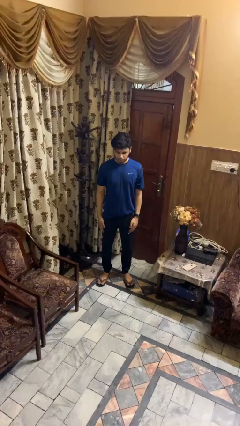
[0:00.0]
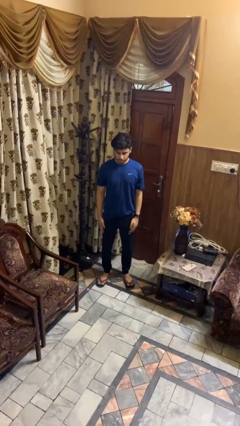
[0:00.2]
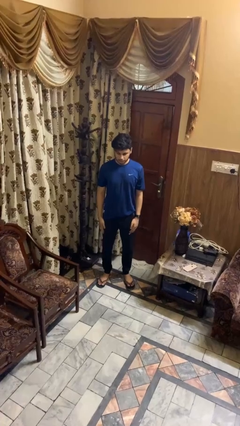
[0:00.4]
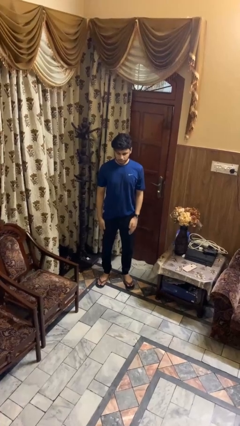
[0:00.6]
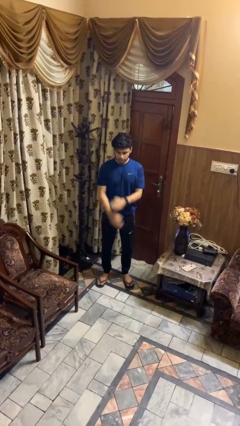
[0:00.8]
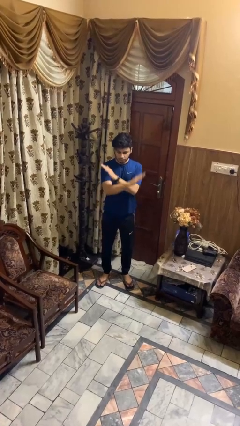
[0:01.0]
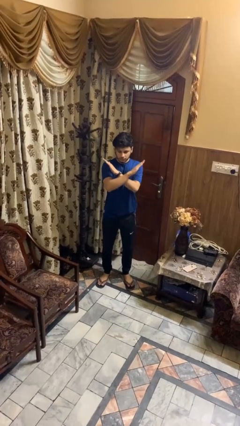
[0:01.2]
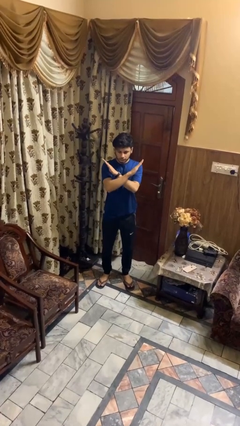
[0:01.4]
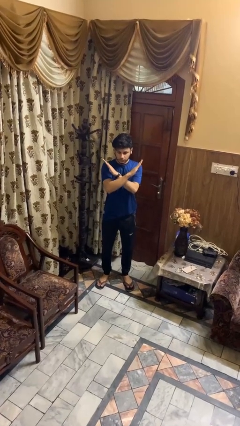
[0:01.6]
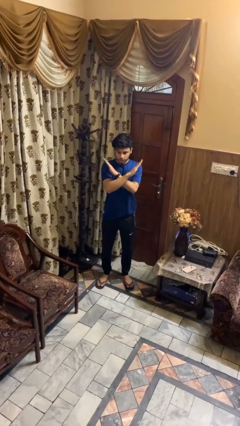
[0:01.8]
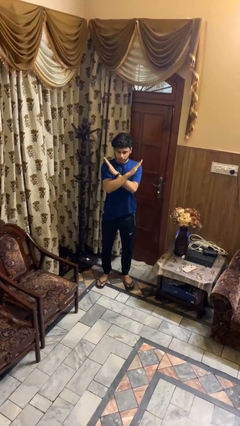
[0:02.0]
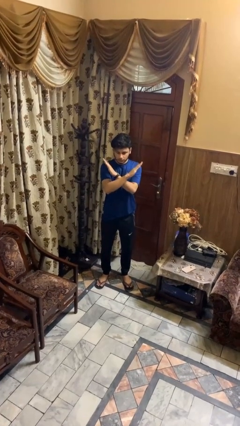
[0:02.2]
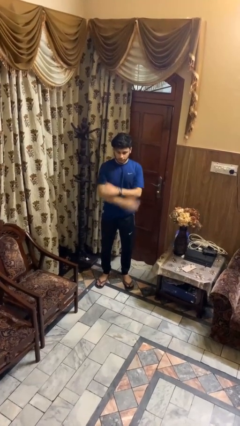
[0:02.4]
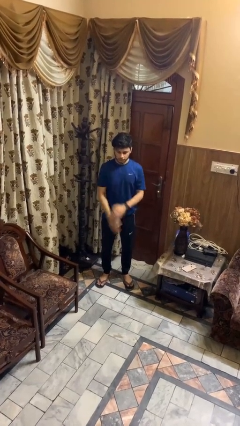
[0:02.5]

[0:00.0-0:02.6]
person gestures arms x

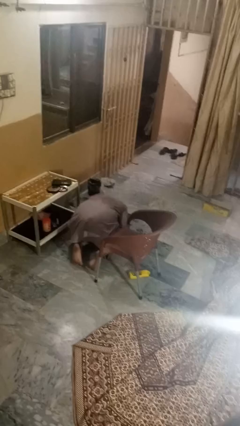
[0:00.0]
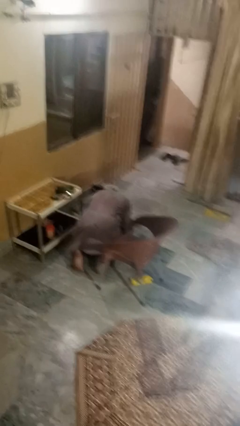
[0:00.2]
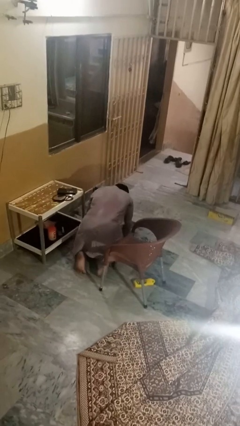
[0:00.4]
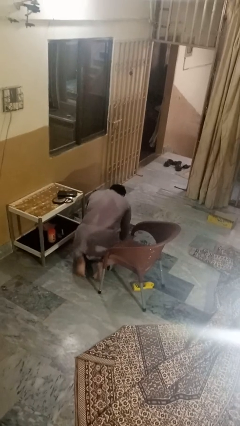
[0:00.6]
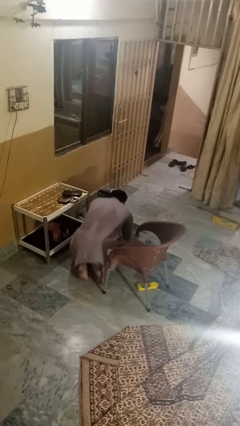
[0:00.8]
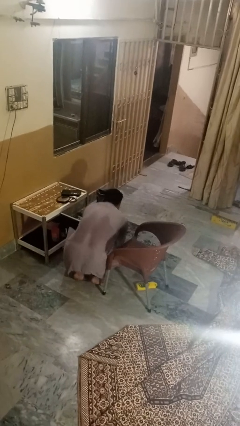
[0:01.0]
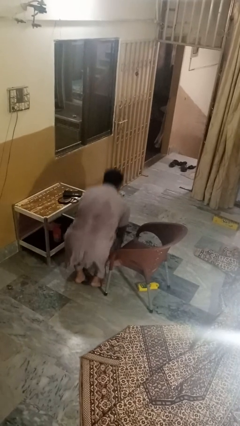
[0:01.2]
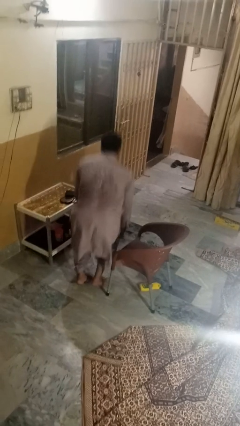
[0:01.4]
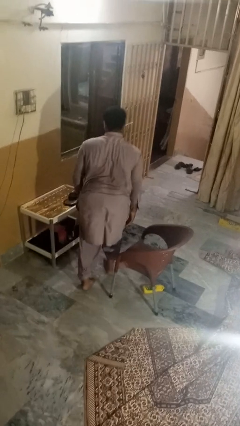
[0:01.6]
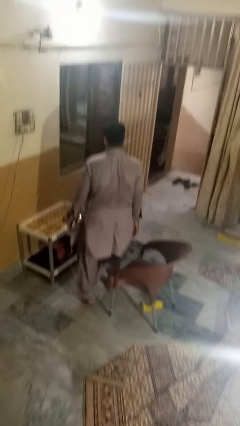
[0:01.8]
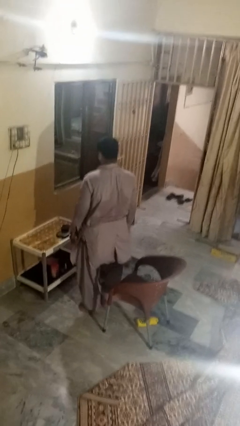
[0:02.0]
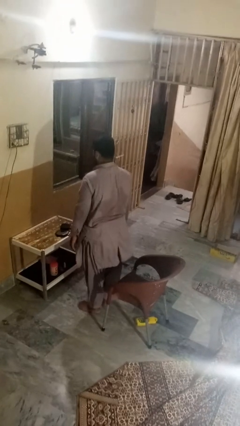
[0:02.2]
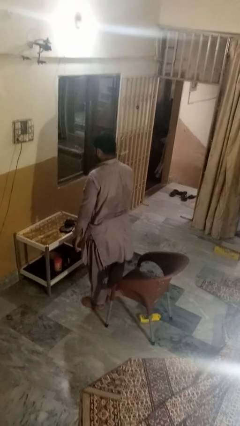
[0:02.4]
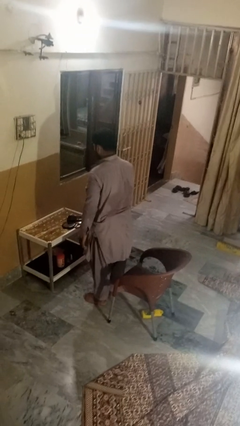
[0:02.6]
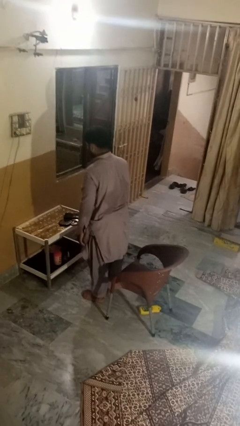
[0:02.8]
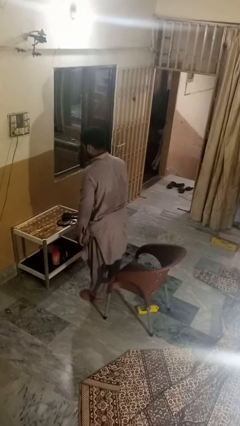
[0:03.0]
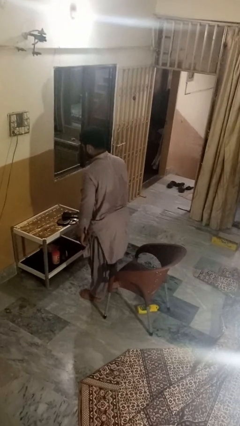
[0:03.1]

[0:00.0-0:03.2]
person stands up from floor

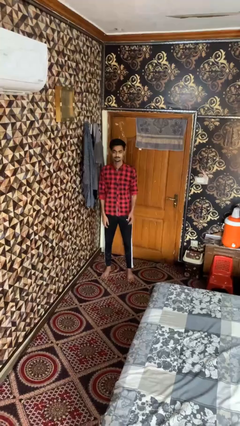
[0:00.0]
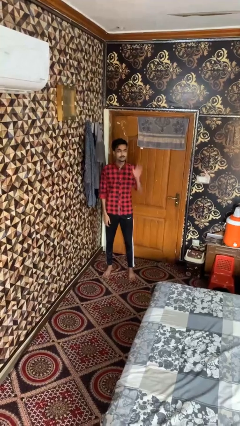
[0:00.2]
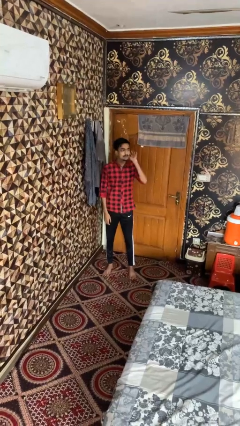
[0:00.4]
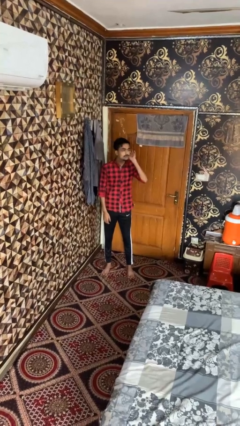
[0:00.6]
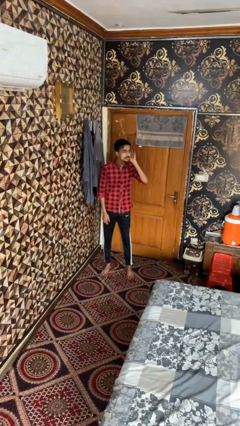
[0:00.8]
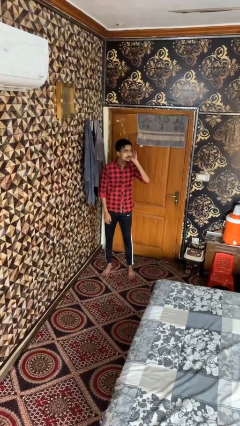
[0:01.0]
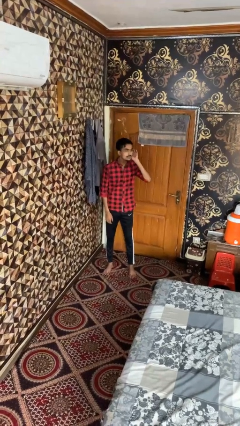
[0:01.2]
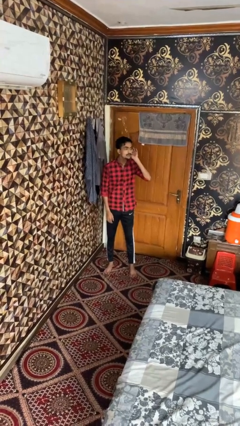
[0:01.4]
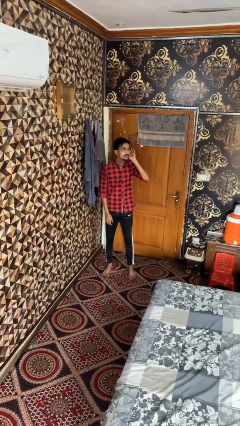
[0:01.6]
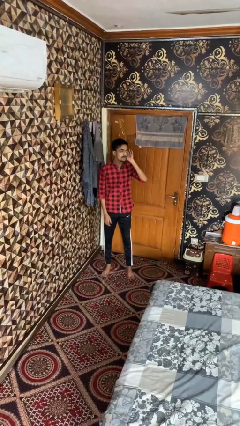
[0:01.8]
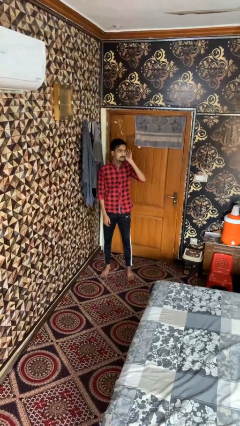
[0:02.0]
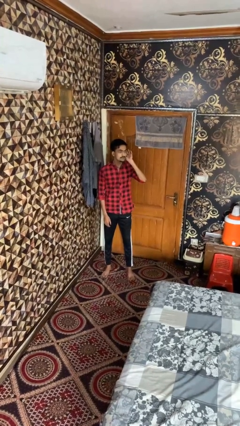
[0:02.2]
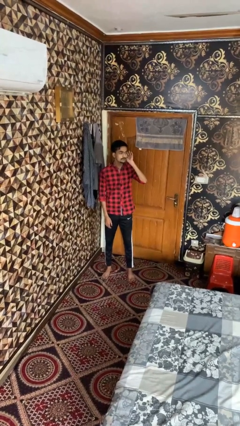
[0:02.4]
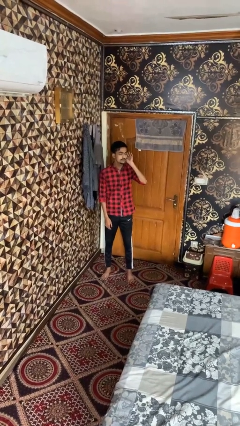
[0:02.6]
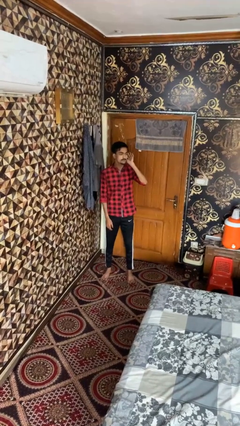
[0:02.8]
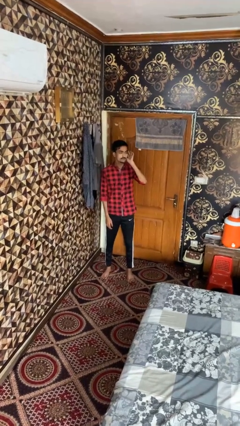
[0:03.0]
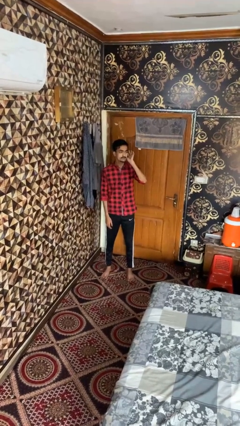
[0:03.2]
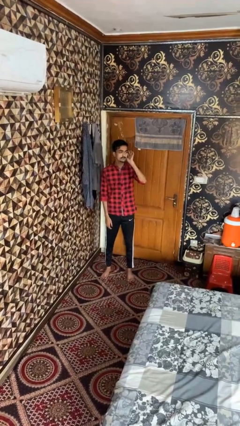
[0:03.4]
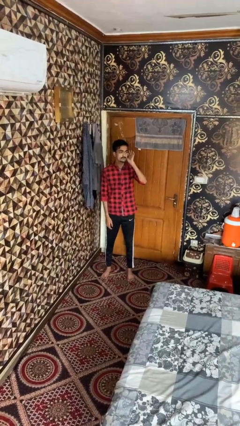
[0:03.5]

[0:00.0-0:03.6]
person gestures listen closely

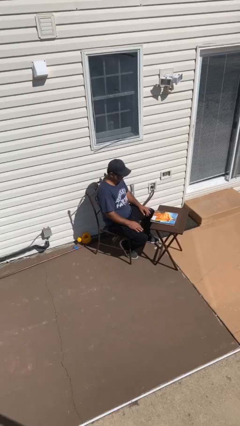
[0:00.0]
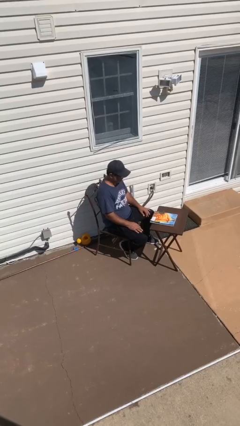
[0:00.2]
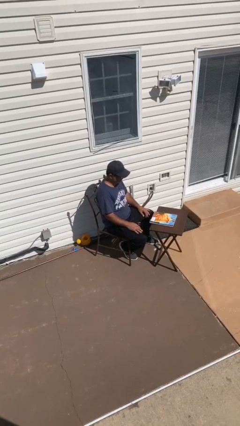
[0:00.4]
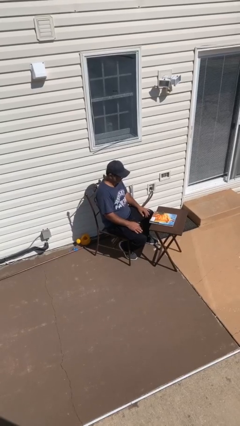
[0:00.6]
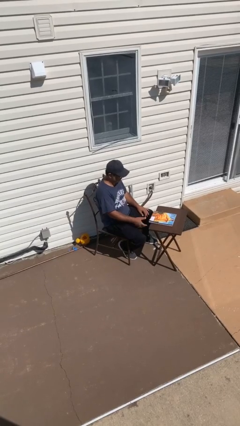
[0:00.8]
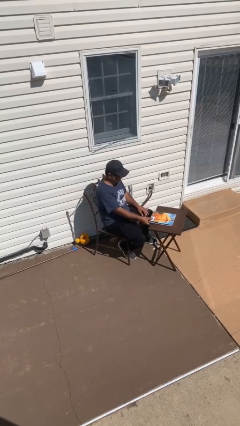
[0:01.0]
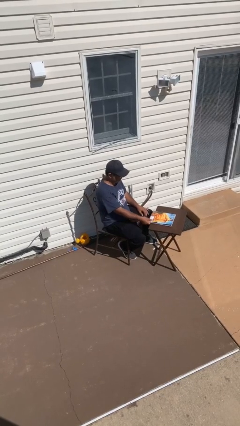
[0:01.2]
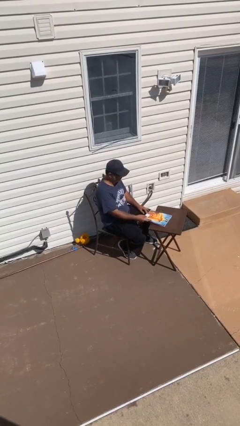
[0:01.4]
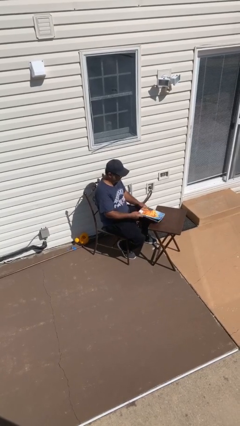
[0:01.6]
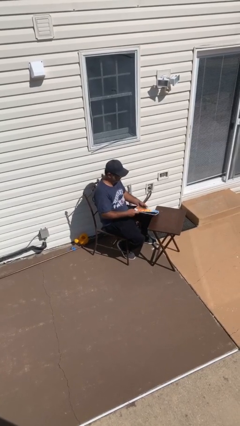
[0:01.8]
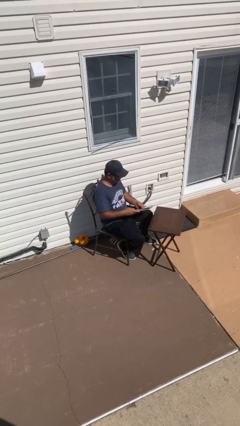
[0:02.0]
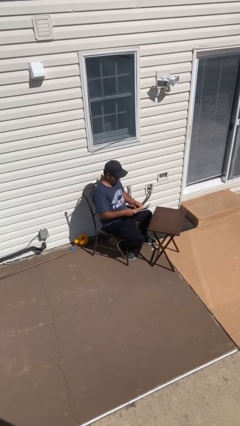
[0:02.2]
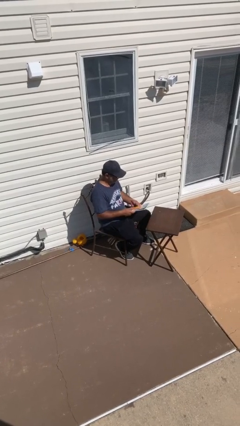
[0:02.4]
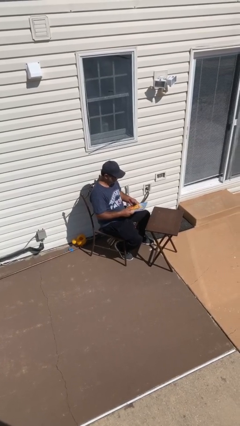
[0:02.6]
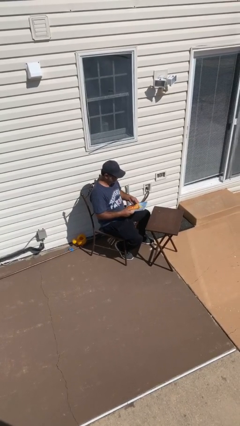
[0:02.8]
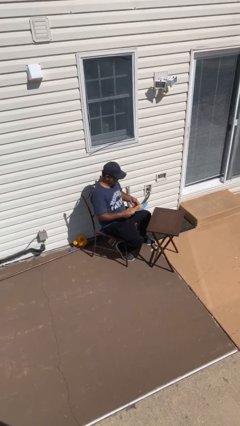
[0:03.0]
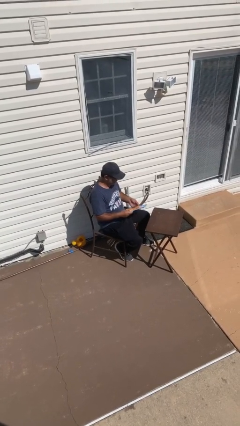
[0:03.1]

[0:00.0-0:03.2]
person picks up object from table

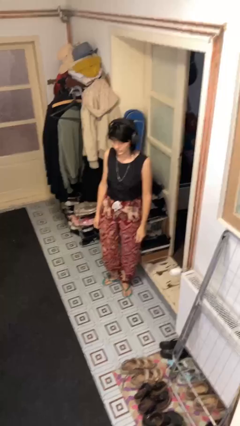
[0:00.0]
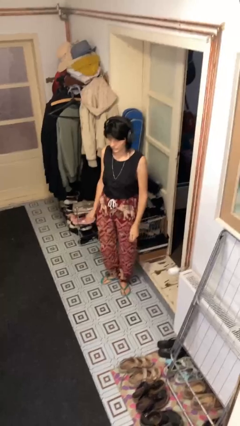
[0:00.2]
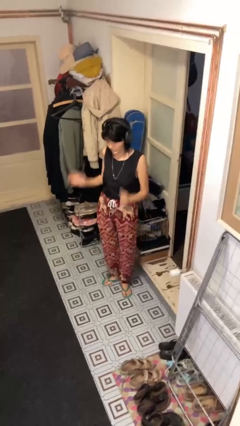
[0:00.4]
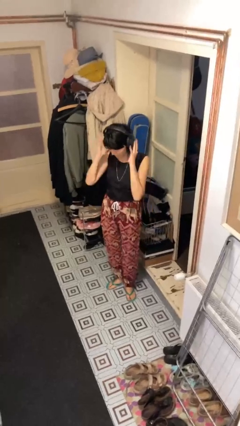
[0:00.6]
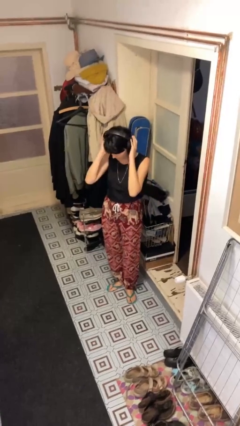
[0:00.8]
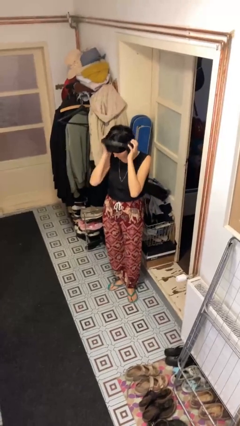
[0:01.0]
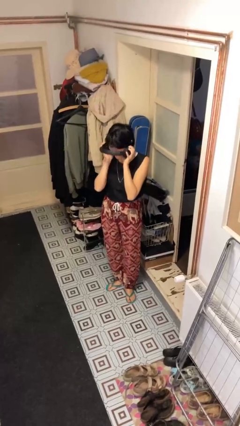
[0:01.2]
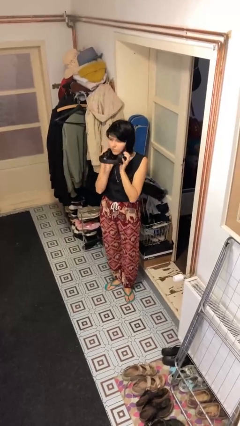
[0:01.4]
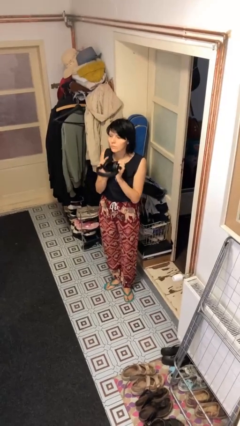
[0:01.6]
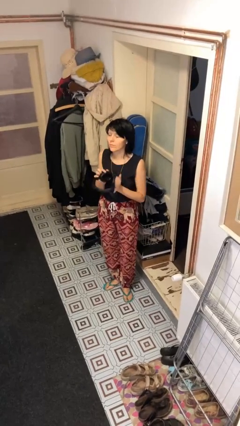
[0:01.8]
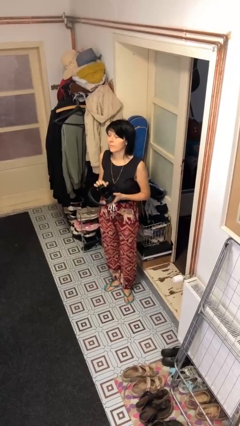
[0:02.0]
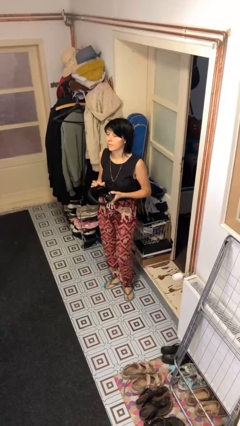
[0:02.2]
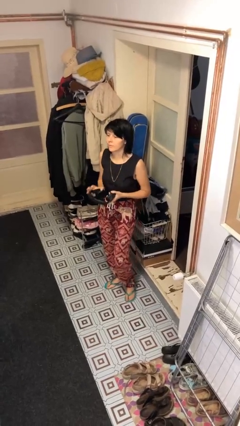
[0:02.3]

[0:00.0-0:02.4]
person takes off headphones

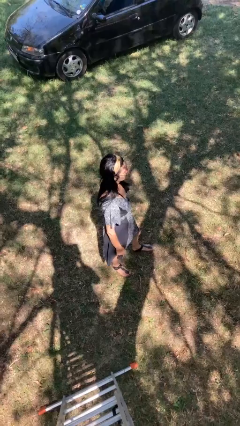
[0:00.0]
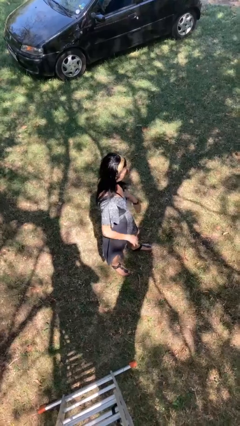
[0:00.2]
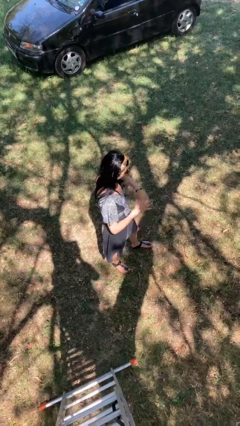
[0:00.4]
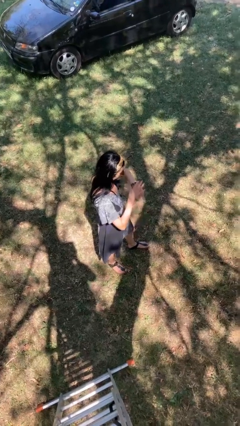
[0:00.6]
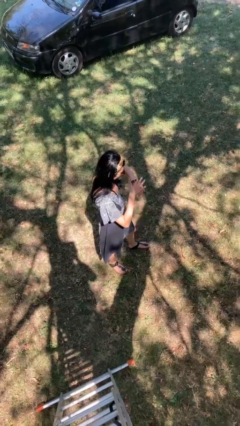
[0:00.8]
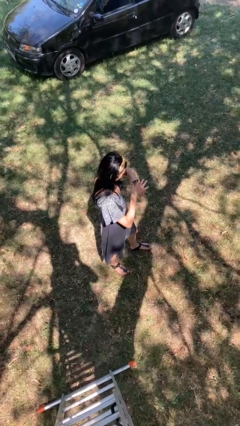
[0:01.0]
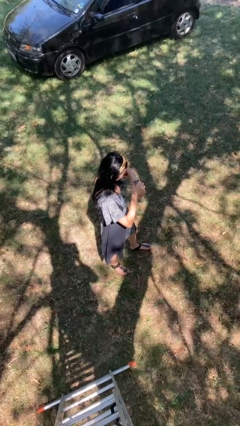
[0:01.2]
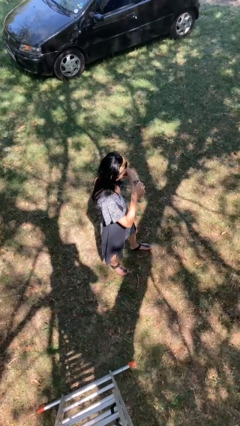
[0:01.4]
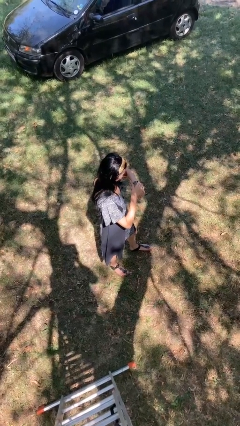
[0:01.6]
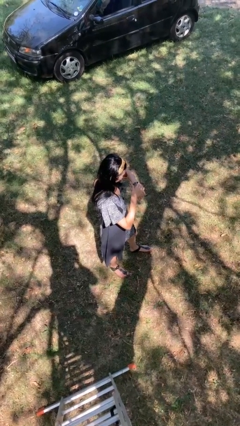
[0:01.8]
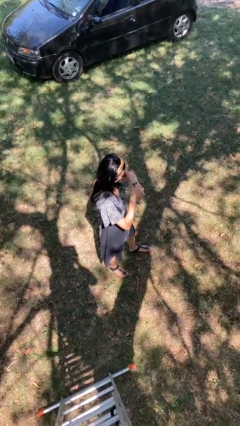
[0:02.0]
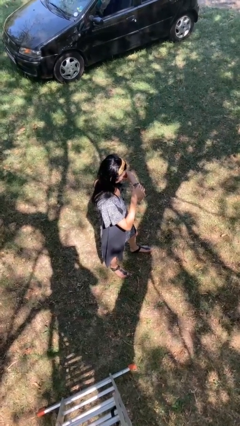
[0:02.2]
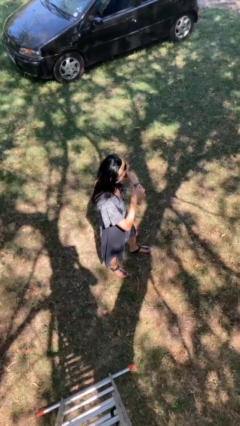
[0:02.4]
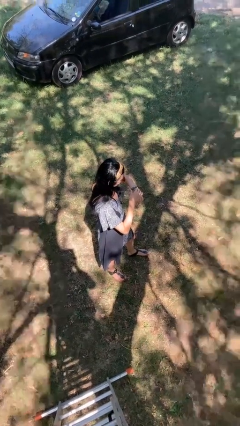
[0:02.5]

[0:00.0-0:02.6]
person looks at wristwatch
